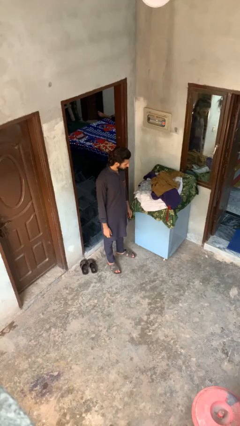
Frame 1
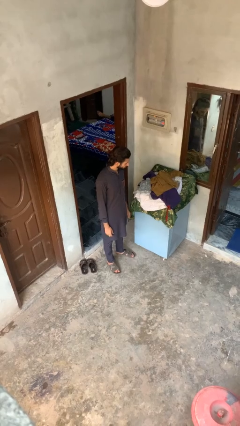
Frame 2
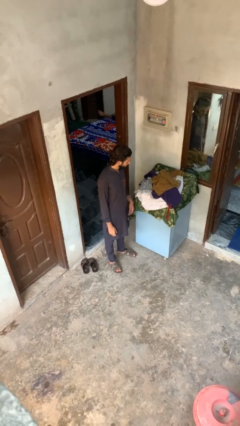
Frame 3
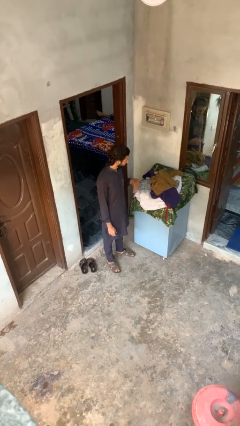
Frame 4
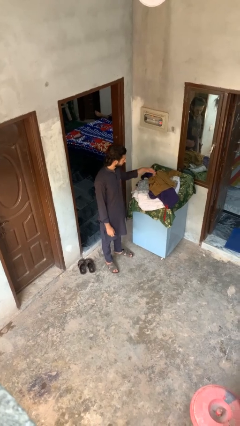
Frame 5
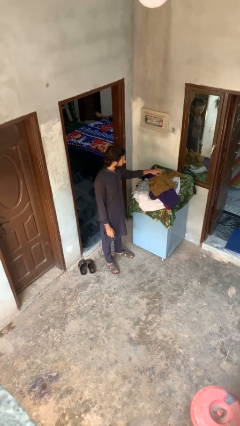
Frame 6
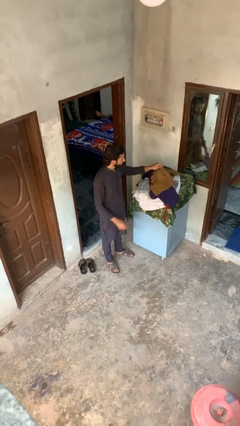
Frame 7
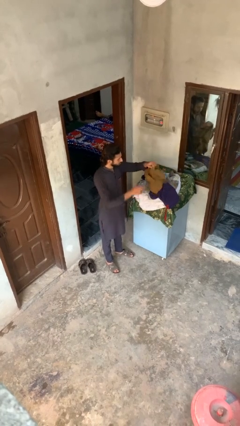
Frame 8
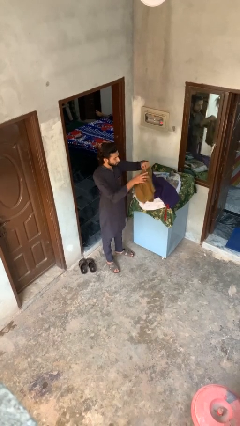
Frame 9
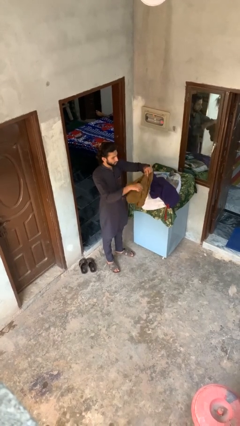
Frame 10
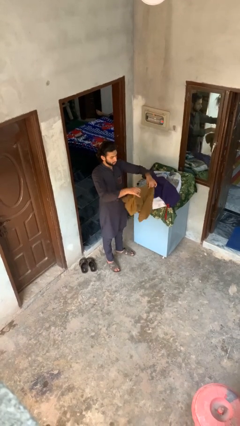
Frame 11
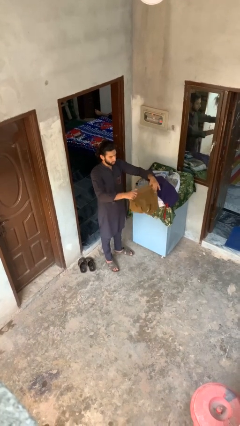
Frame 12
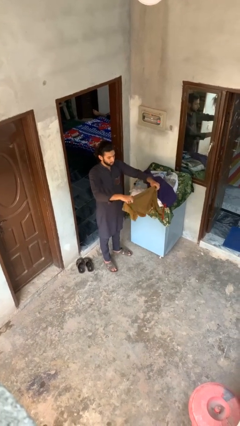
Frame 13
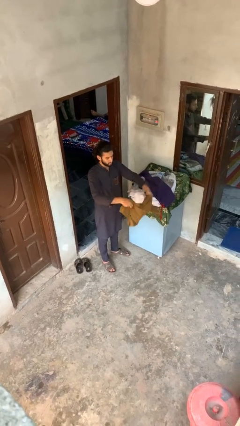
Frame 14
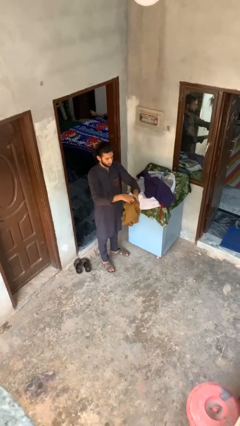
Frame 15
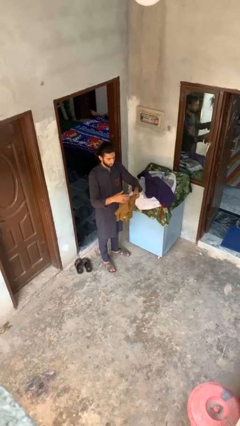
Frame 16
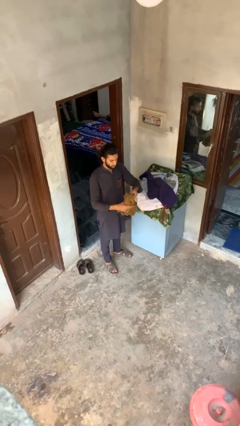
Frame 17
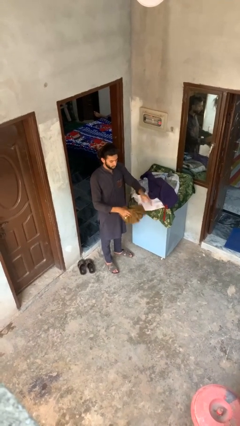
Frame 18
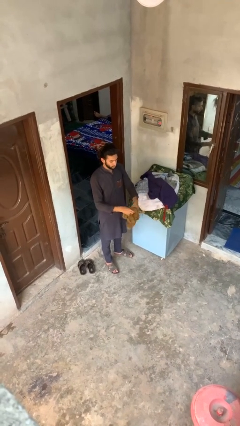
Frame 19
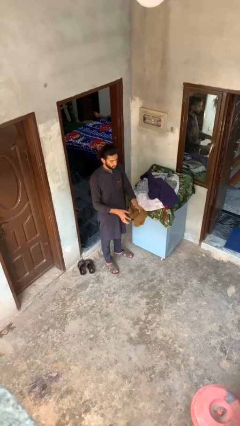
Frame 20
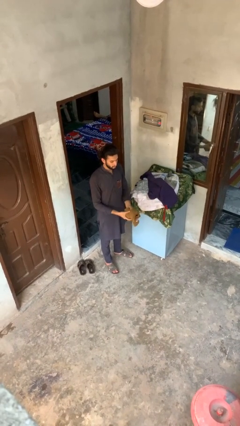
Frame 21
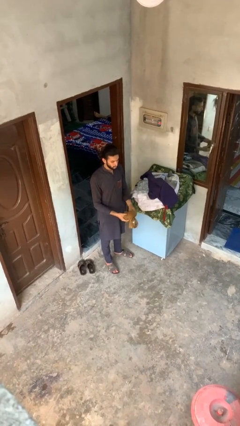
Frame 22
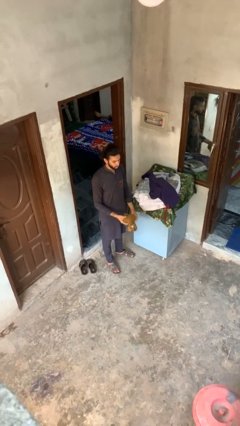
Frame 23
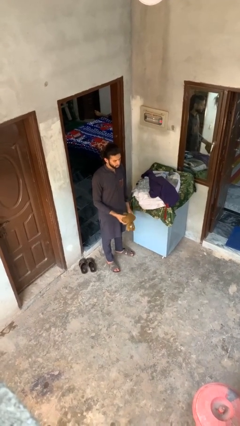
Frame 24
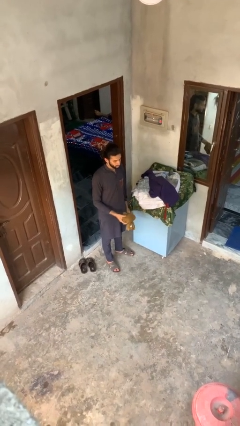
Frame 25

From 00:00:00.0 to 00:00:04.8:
person folds shirt

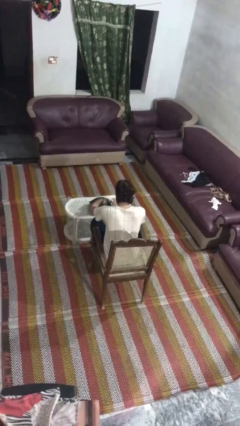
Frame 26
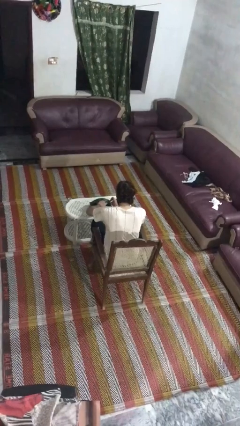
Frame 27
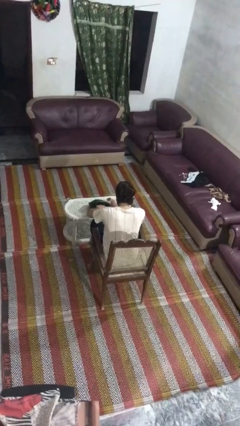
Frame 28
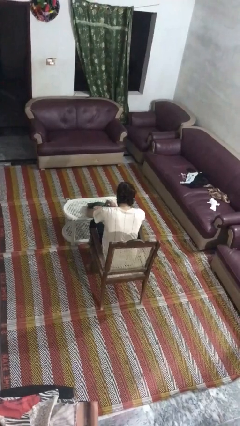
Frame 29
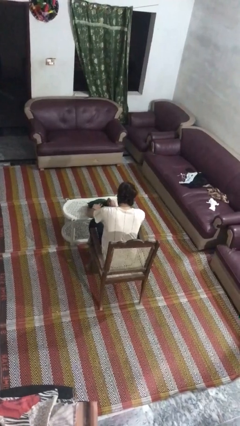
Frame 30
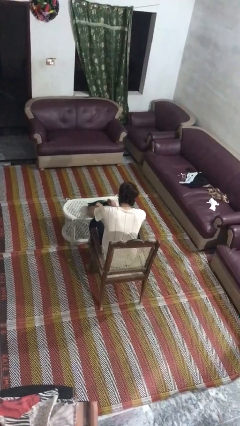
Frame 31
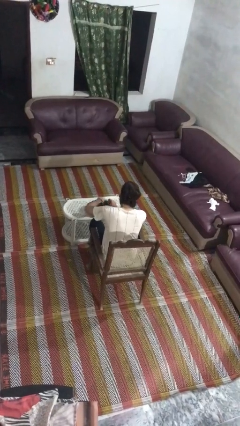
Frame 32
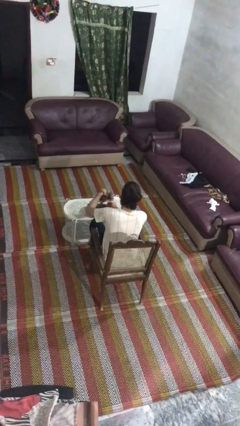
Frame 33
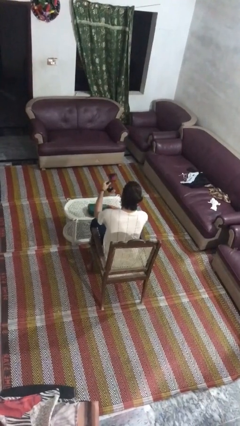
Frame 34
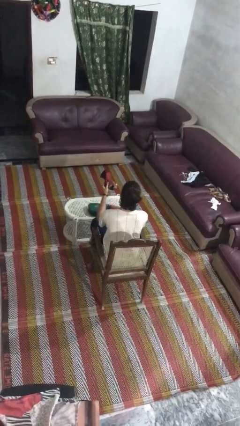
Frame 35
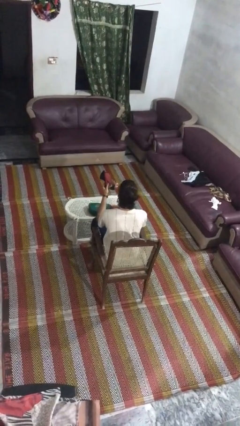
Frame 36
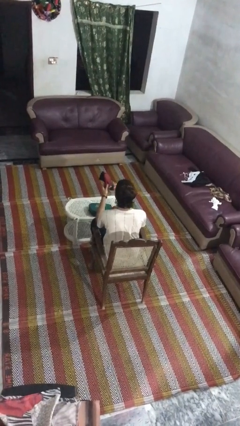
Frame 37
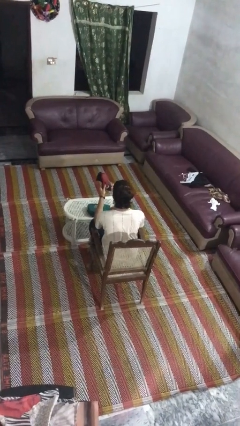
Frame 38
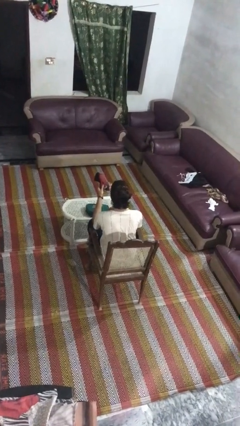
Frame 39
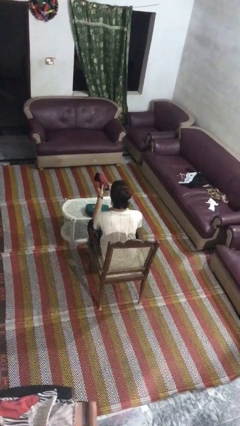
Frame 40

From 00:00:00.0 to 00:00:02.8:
person takes object from purse

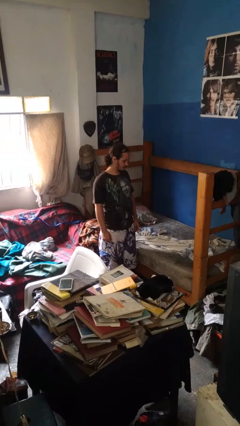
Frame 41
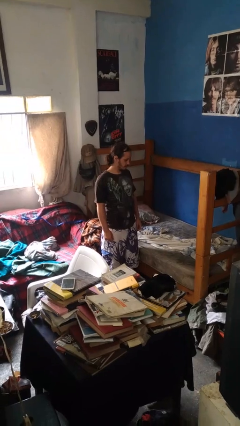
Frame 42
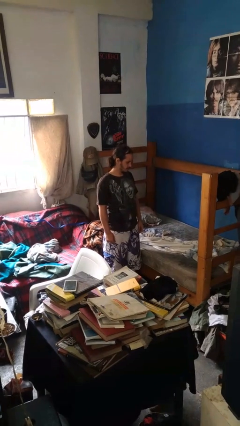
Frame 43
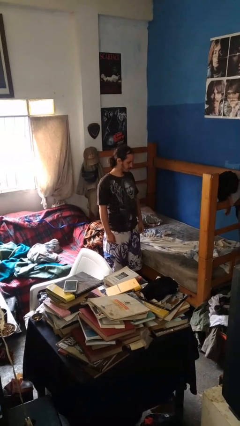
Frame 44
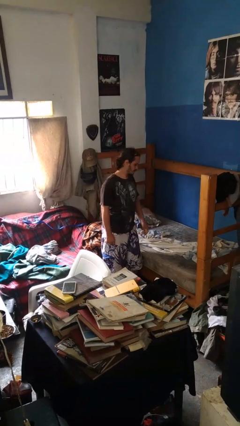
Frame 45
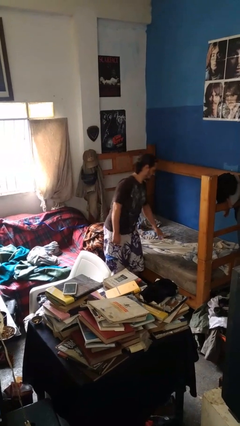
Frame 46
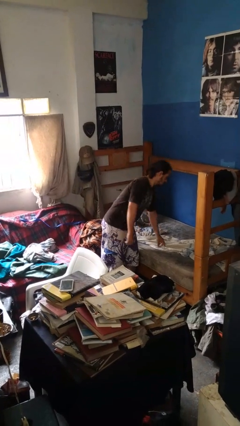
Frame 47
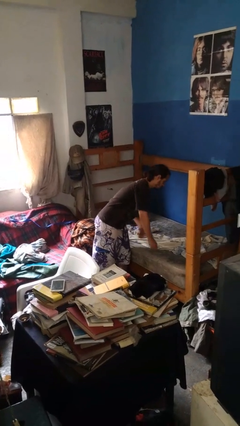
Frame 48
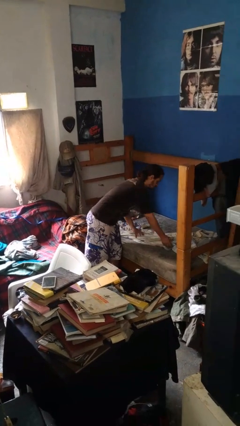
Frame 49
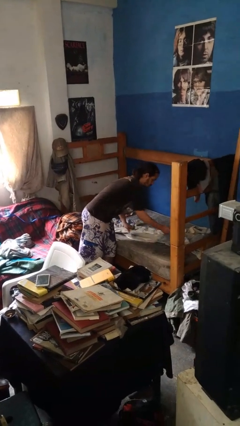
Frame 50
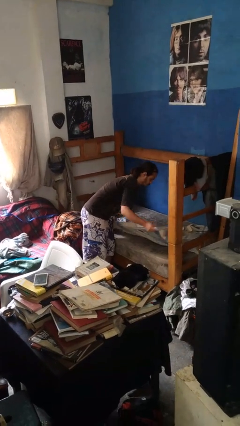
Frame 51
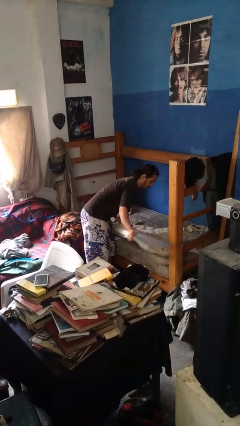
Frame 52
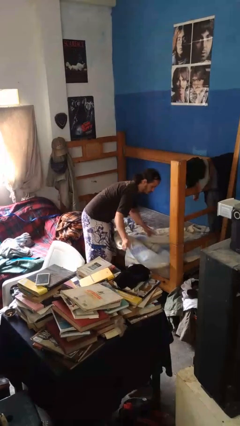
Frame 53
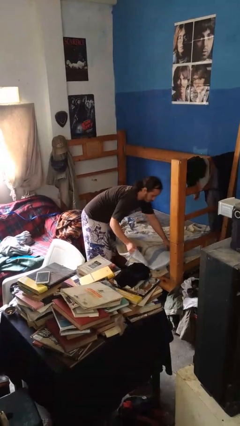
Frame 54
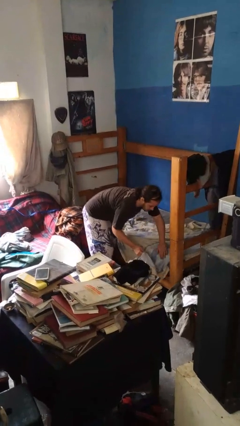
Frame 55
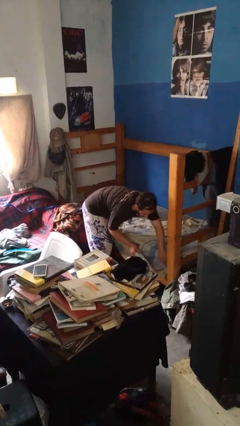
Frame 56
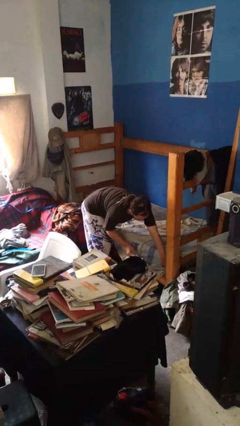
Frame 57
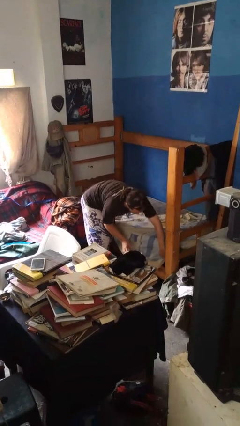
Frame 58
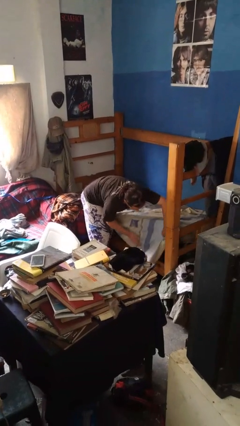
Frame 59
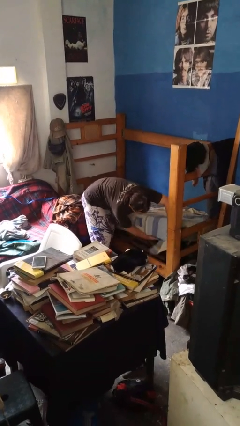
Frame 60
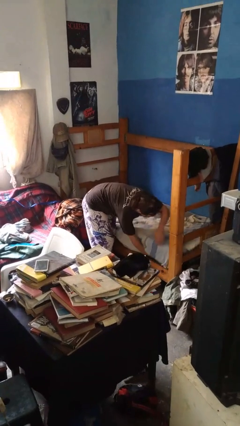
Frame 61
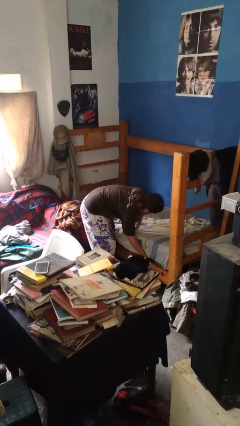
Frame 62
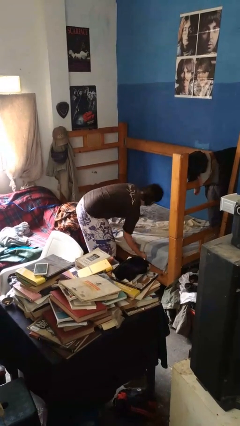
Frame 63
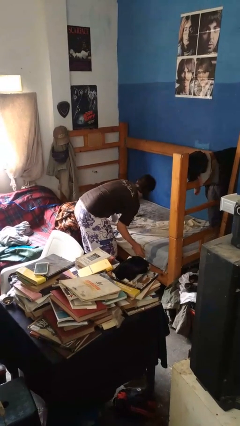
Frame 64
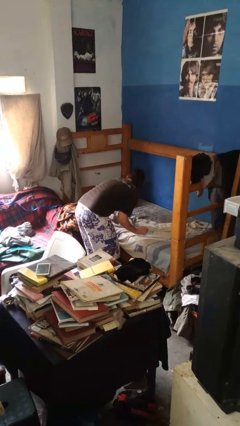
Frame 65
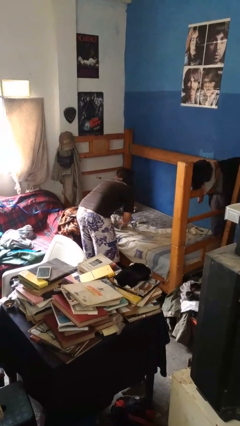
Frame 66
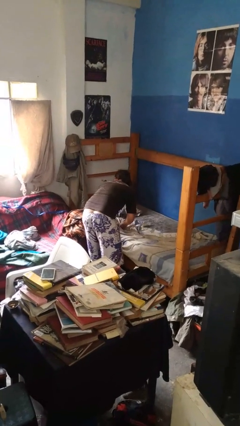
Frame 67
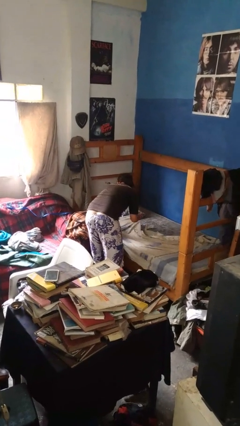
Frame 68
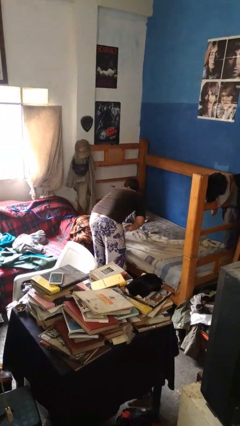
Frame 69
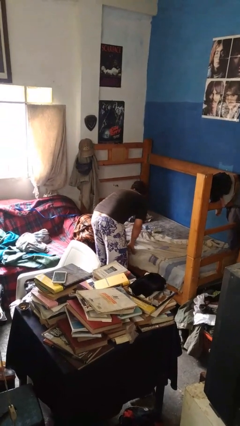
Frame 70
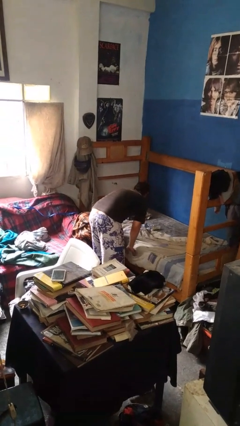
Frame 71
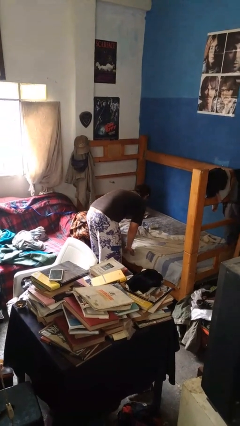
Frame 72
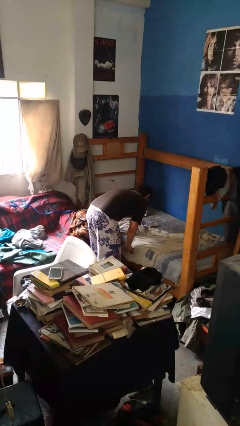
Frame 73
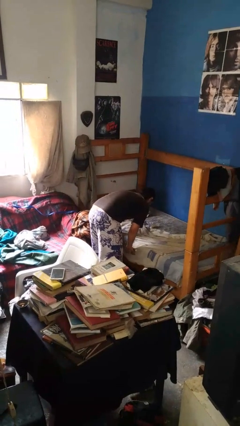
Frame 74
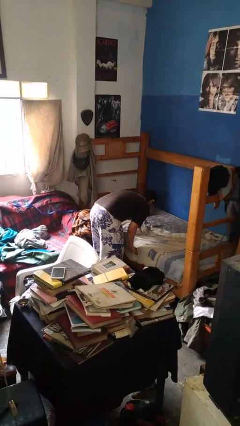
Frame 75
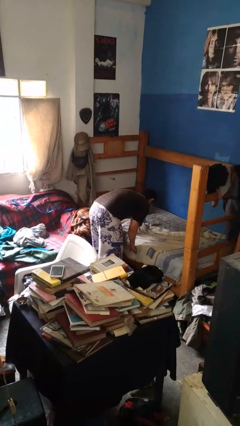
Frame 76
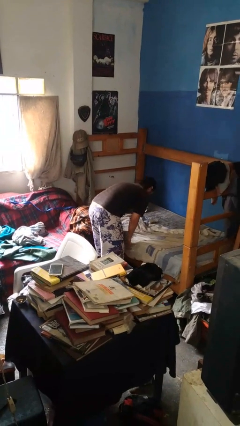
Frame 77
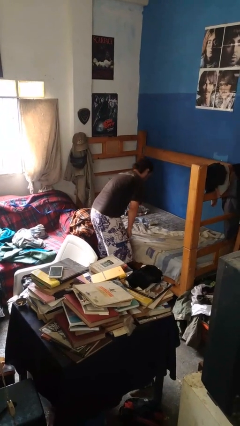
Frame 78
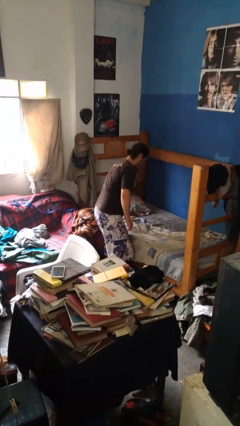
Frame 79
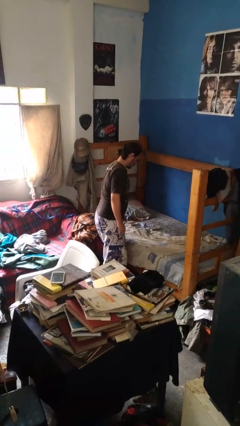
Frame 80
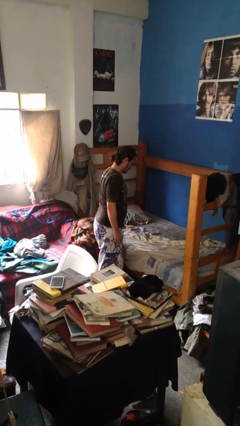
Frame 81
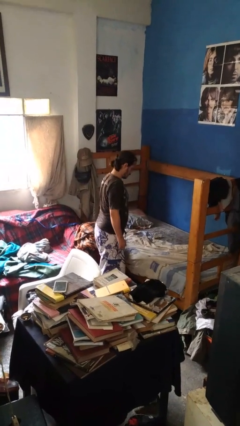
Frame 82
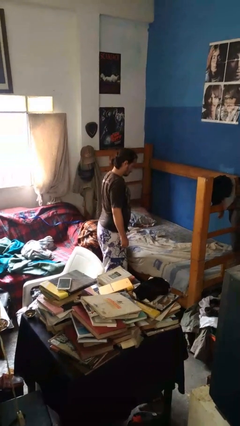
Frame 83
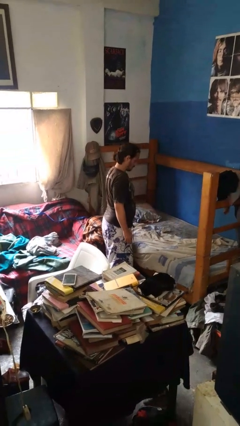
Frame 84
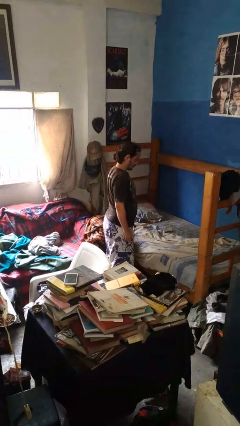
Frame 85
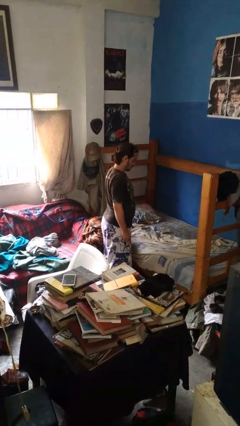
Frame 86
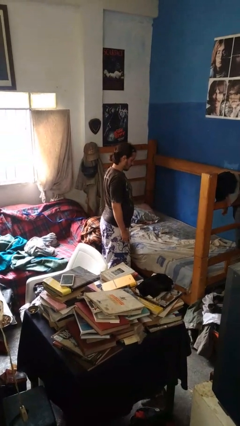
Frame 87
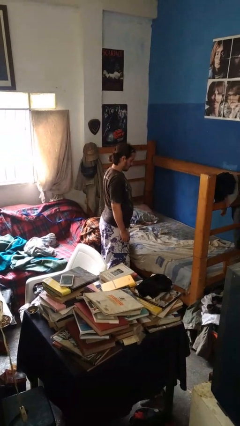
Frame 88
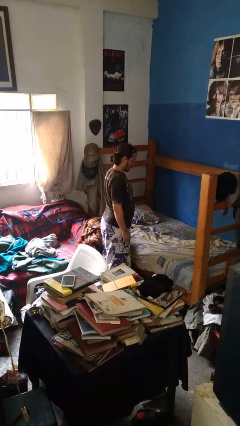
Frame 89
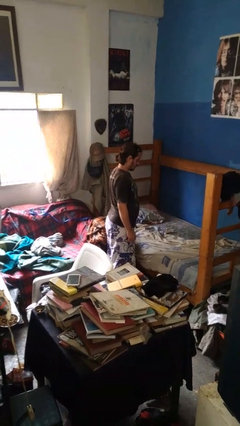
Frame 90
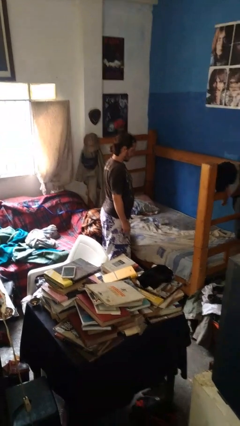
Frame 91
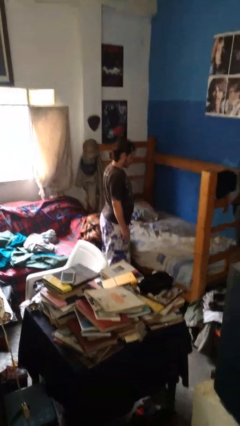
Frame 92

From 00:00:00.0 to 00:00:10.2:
person makes bed
